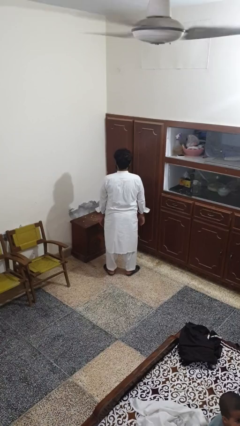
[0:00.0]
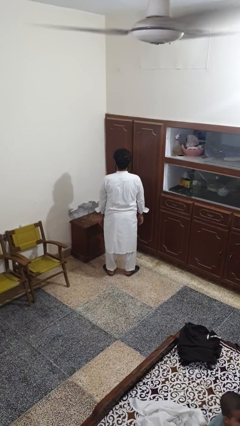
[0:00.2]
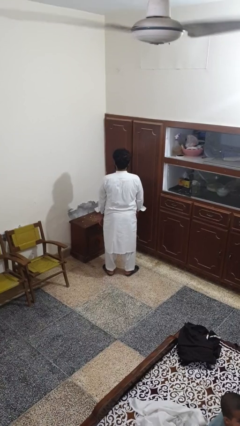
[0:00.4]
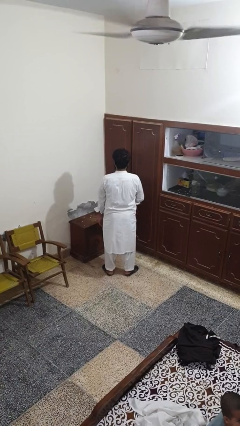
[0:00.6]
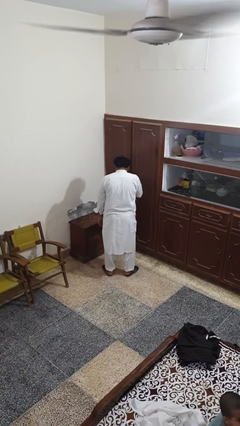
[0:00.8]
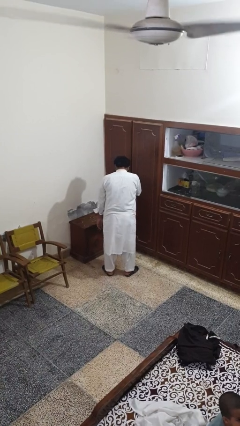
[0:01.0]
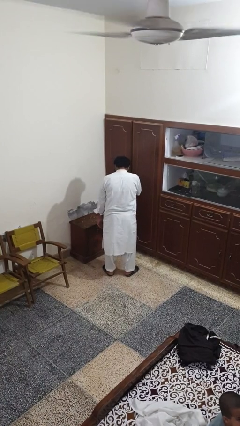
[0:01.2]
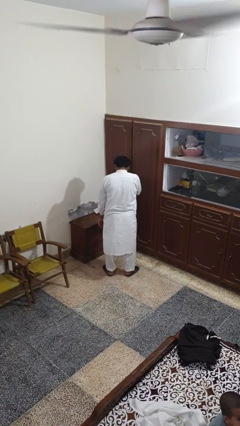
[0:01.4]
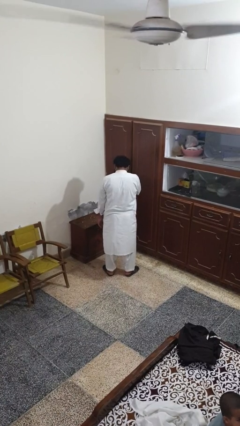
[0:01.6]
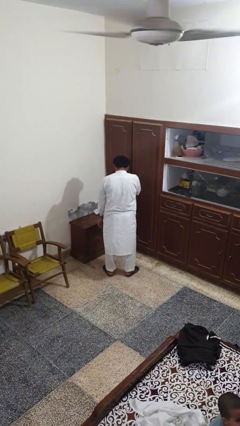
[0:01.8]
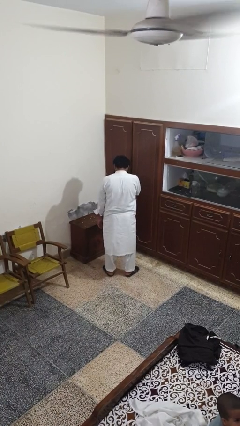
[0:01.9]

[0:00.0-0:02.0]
person sneezes into hand

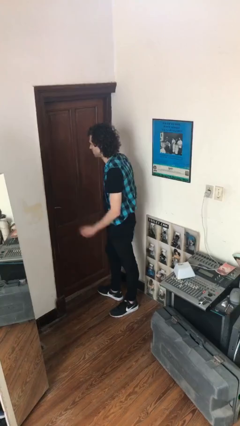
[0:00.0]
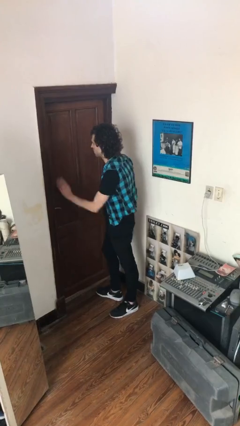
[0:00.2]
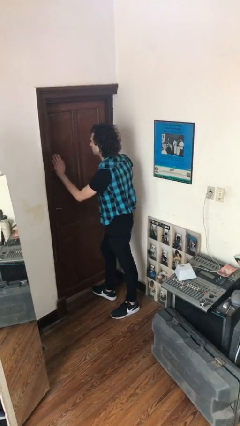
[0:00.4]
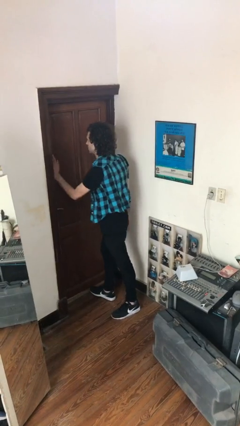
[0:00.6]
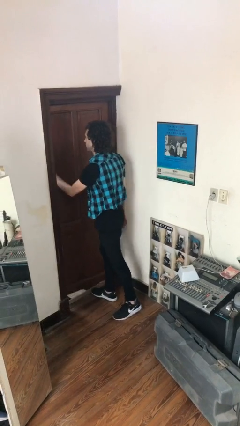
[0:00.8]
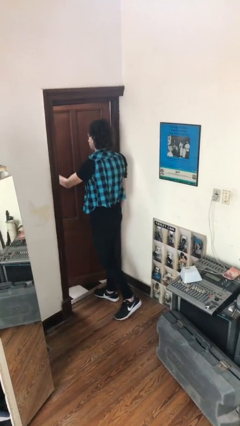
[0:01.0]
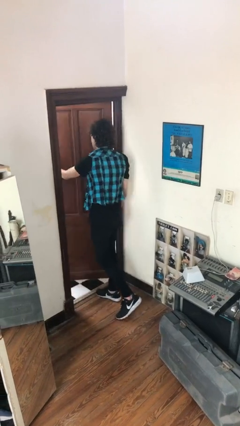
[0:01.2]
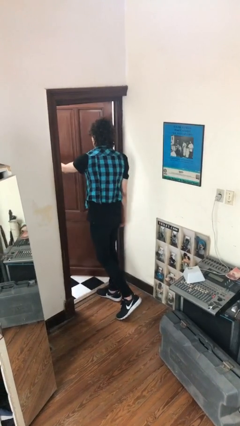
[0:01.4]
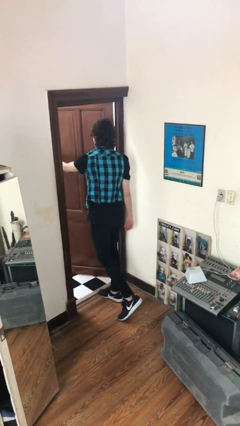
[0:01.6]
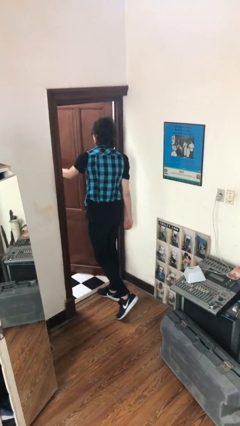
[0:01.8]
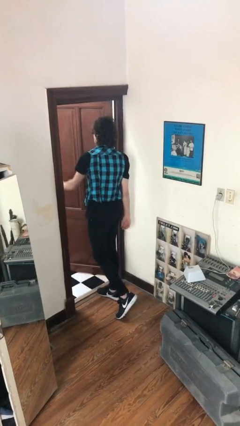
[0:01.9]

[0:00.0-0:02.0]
person opens facility door

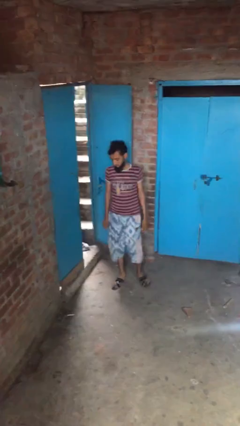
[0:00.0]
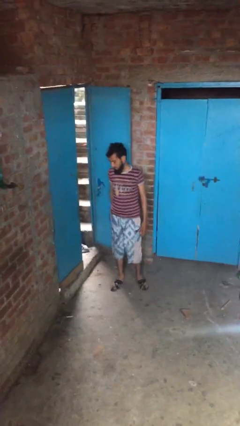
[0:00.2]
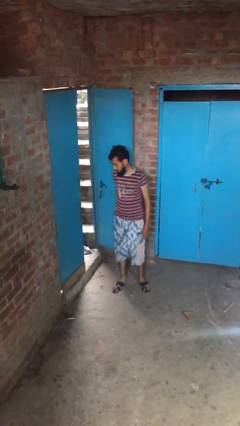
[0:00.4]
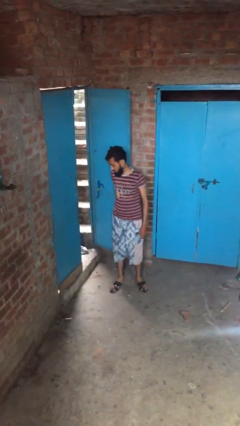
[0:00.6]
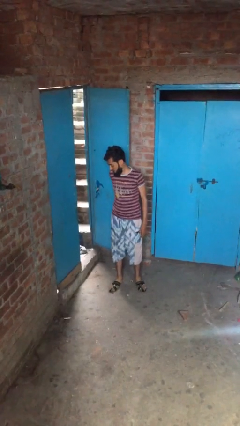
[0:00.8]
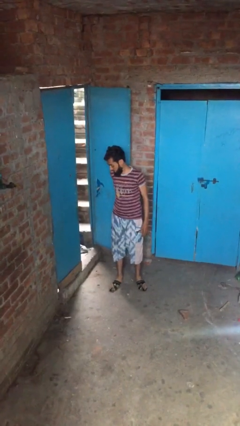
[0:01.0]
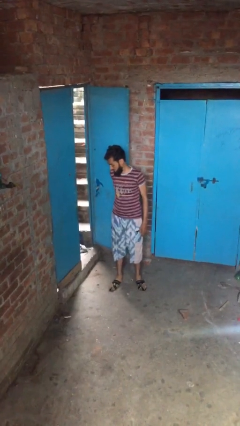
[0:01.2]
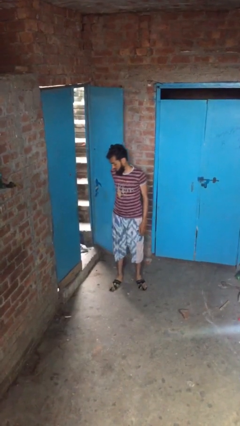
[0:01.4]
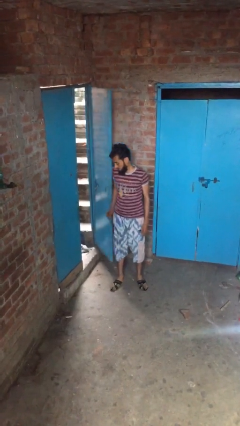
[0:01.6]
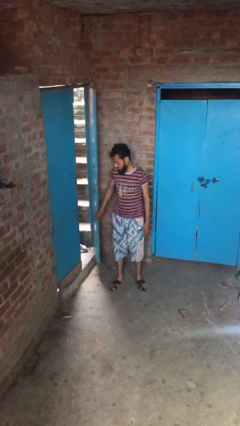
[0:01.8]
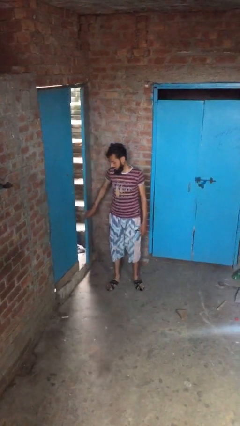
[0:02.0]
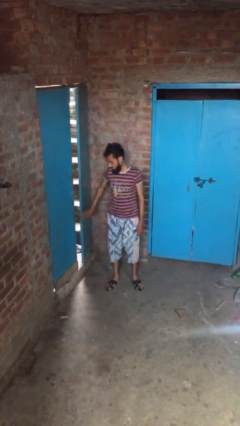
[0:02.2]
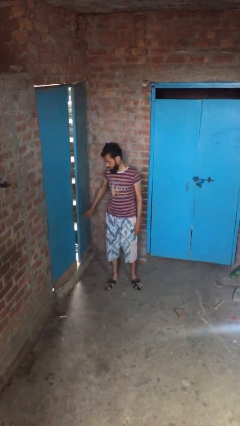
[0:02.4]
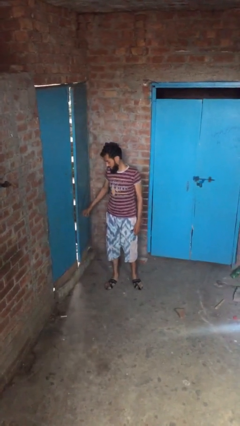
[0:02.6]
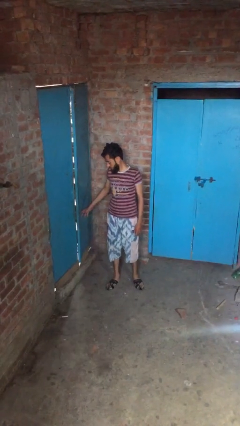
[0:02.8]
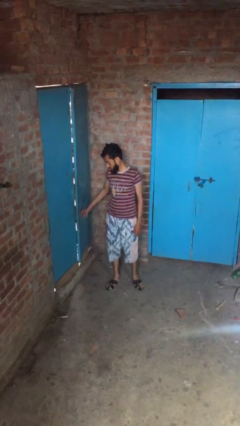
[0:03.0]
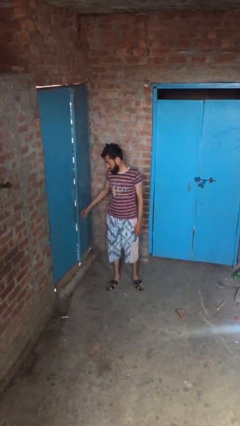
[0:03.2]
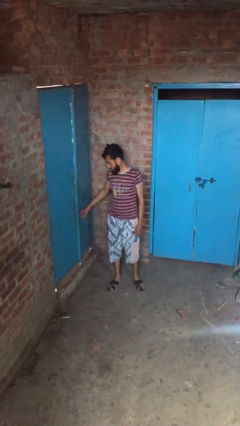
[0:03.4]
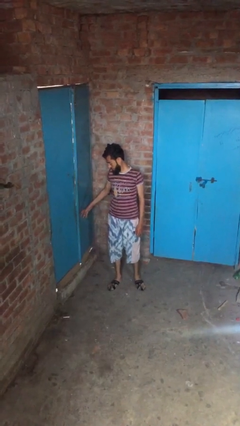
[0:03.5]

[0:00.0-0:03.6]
person closes facility door

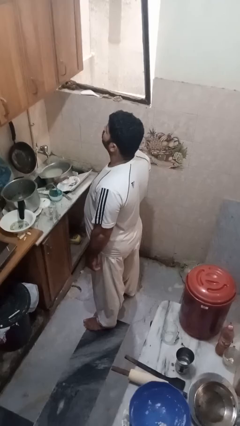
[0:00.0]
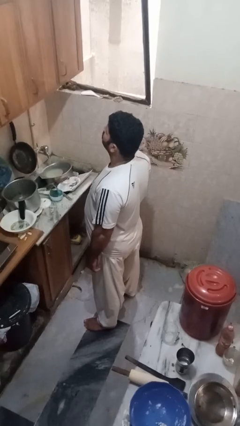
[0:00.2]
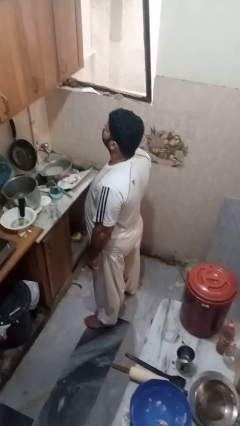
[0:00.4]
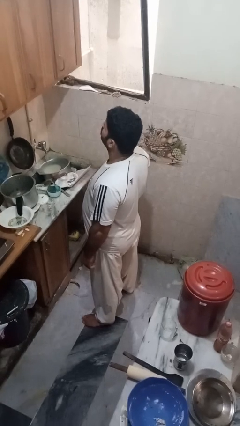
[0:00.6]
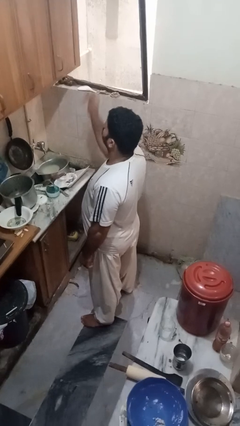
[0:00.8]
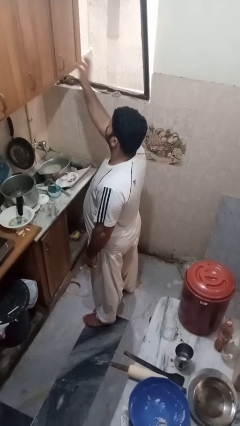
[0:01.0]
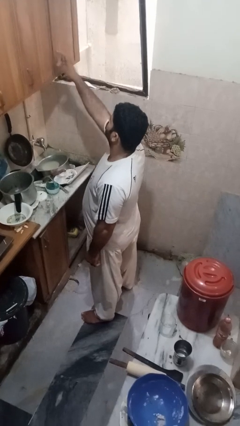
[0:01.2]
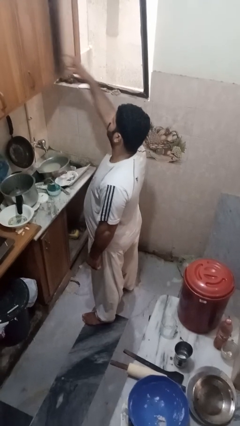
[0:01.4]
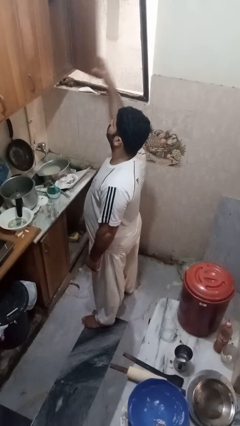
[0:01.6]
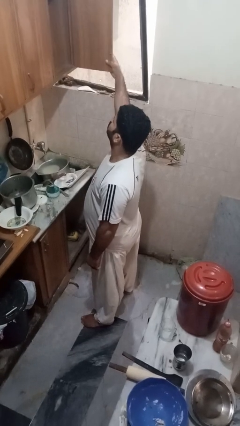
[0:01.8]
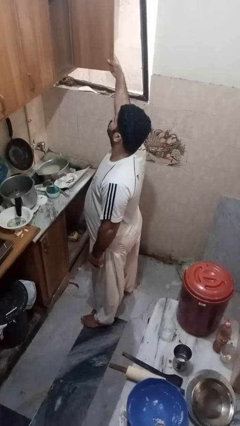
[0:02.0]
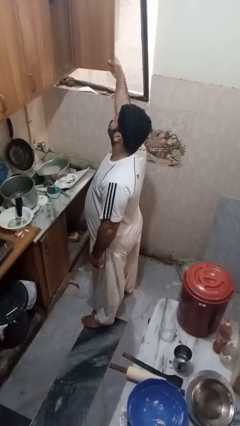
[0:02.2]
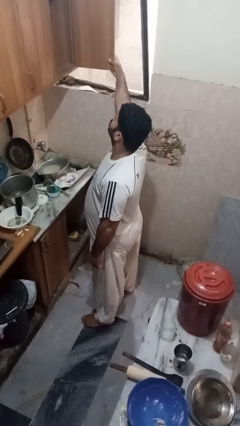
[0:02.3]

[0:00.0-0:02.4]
person opens cabinet

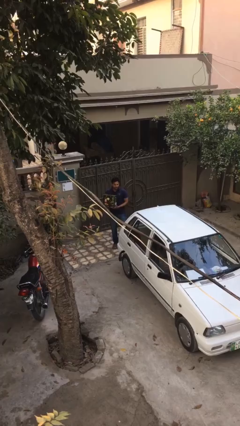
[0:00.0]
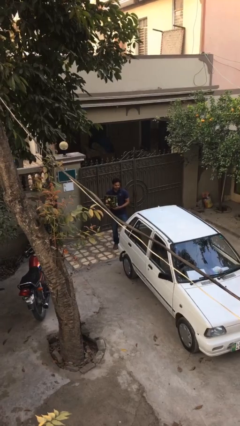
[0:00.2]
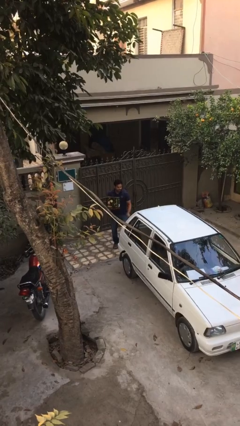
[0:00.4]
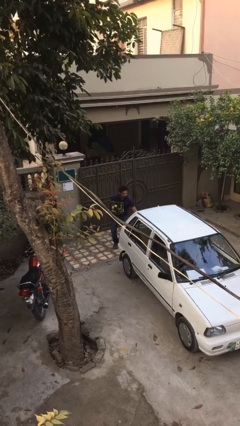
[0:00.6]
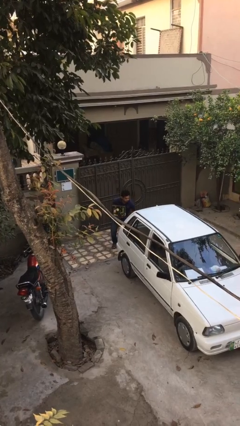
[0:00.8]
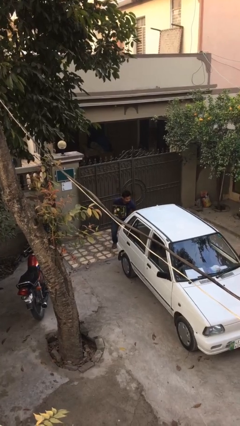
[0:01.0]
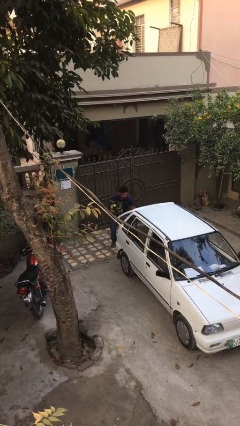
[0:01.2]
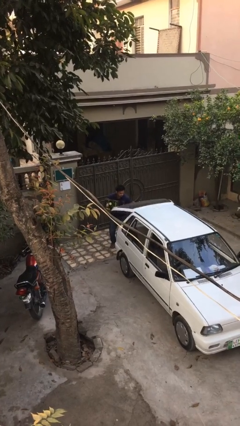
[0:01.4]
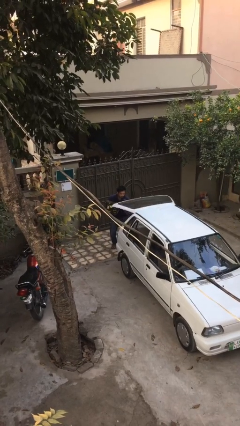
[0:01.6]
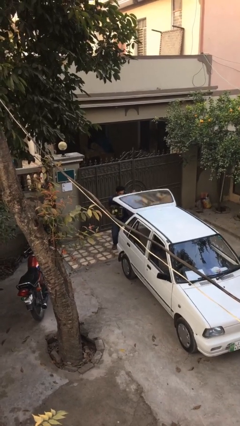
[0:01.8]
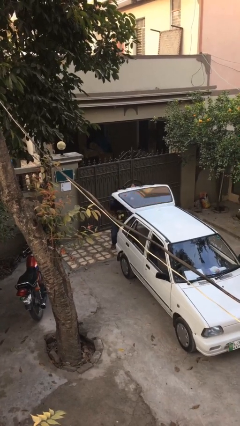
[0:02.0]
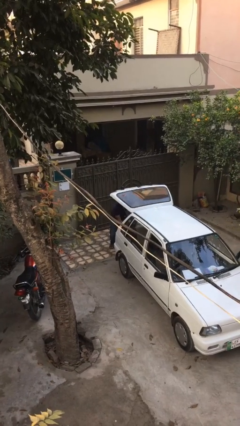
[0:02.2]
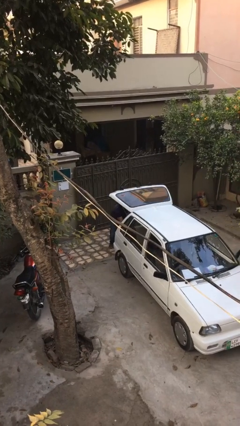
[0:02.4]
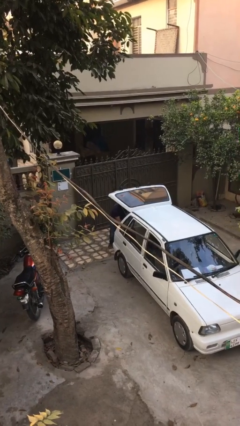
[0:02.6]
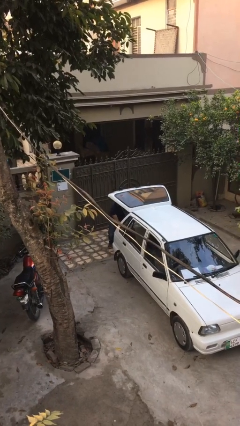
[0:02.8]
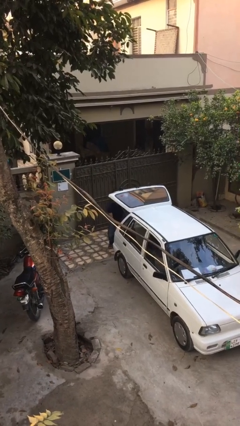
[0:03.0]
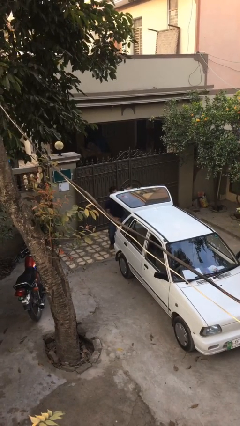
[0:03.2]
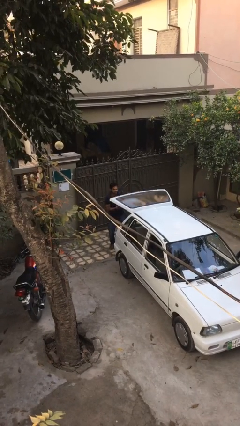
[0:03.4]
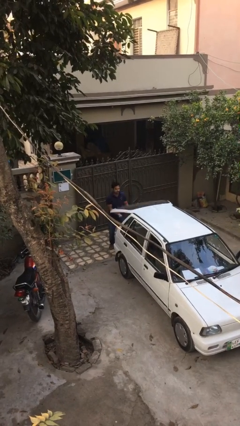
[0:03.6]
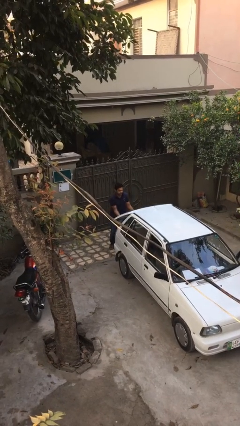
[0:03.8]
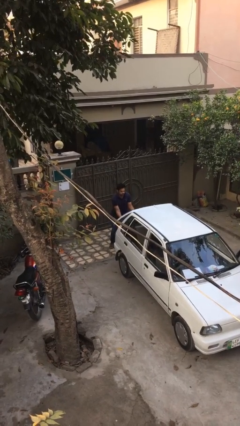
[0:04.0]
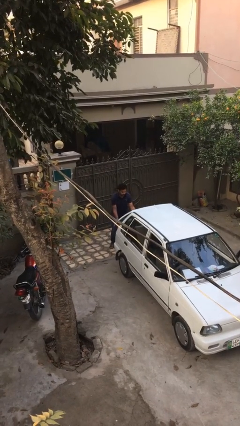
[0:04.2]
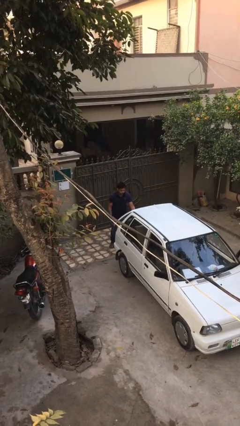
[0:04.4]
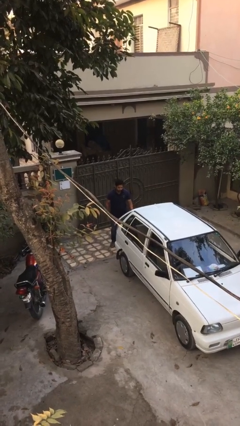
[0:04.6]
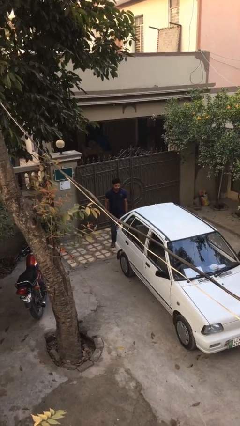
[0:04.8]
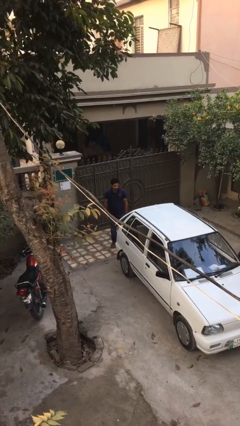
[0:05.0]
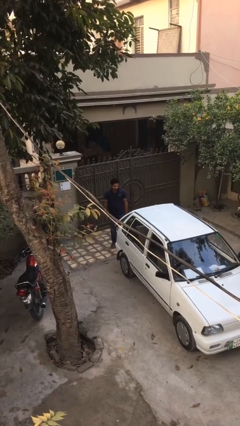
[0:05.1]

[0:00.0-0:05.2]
person loads car

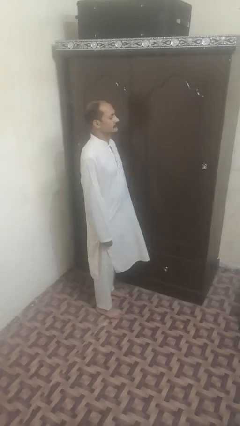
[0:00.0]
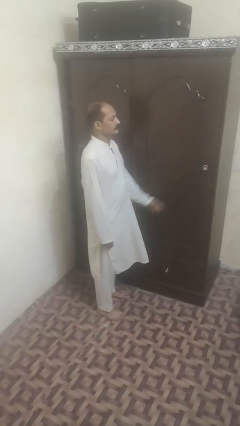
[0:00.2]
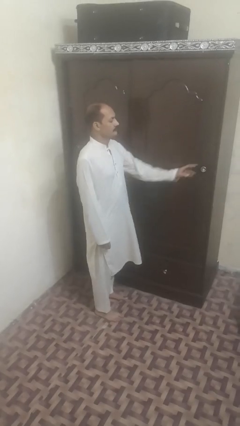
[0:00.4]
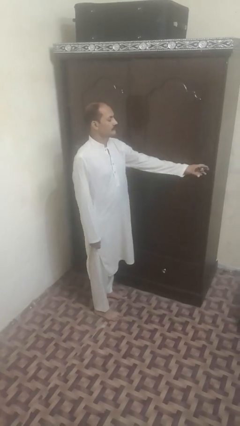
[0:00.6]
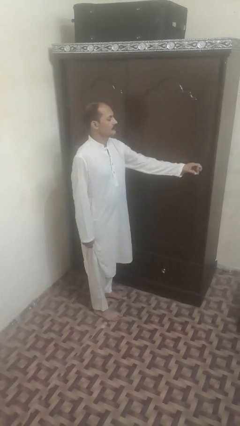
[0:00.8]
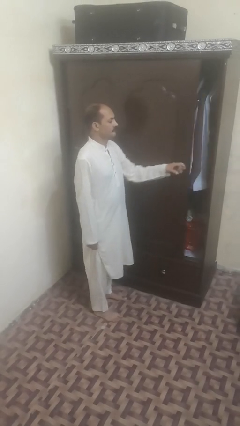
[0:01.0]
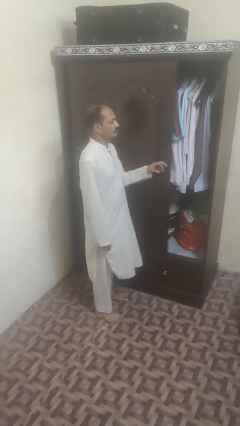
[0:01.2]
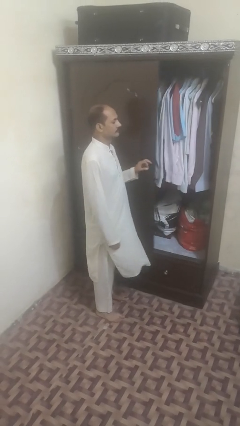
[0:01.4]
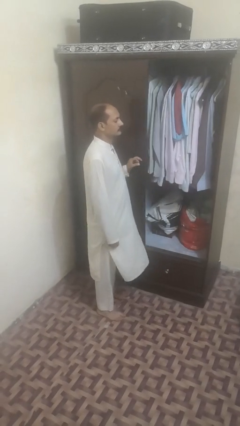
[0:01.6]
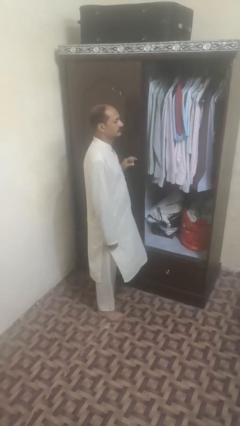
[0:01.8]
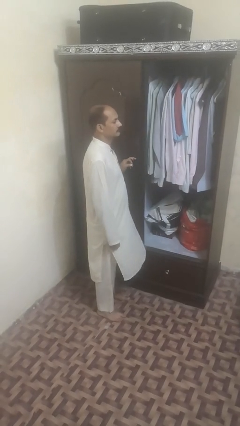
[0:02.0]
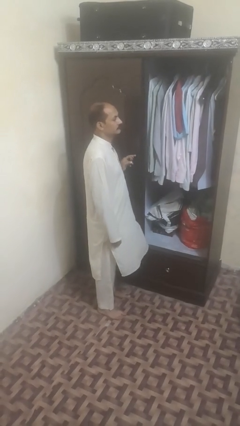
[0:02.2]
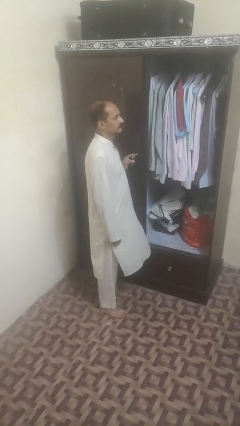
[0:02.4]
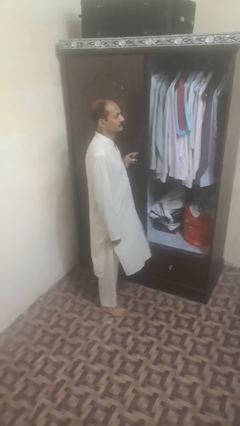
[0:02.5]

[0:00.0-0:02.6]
person opens sliding door
